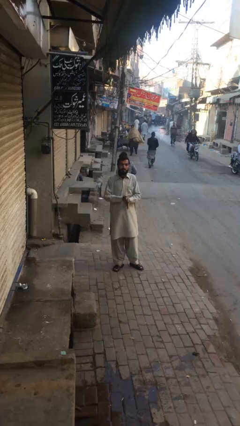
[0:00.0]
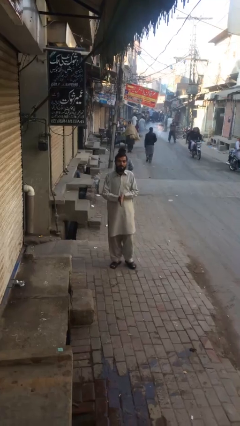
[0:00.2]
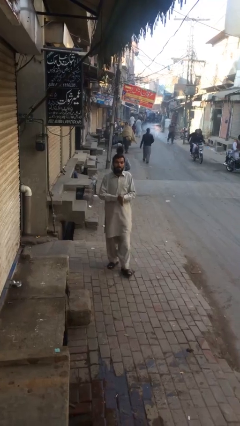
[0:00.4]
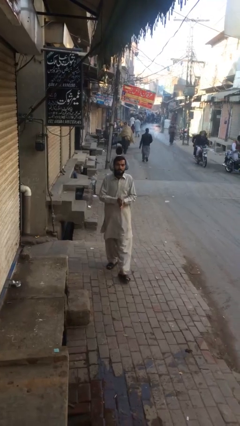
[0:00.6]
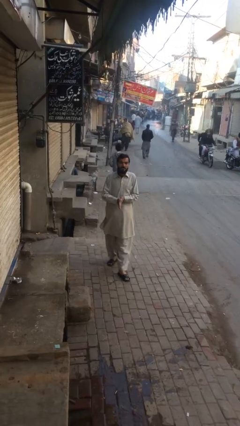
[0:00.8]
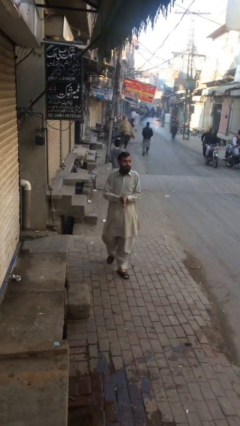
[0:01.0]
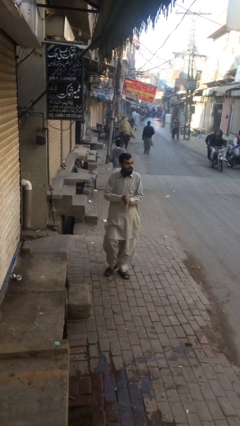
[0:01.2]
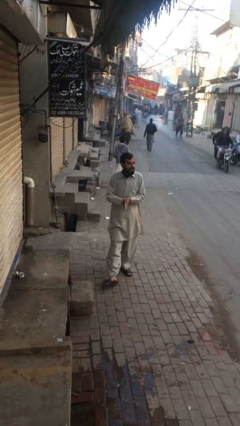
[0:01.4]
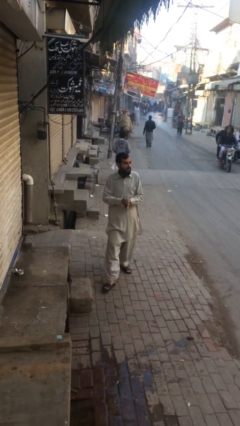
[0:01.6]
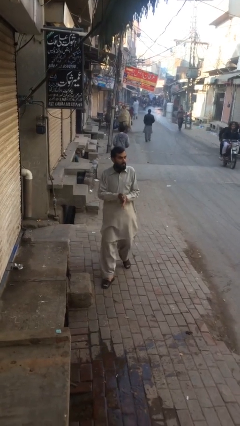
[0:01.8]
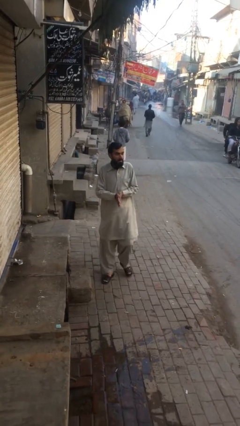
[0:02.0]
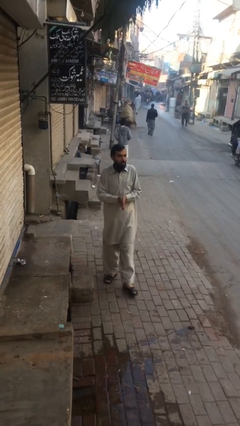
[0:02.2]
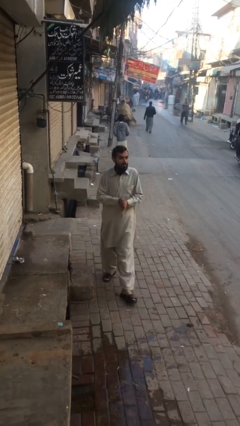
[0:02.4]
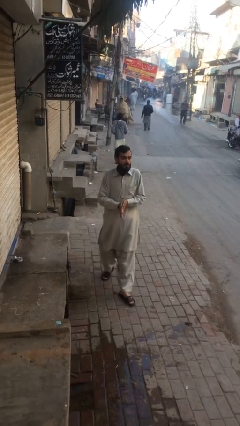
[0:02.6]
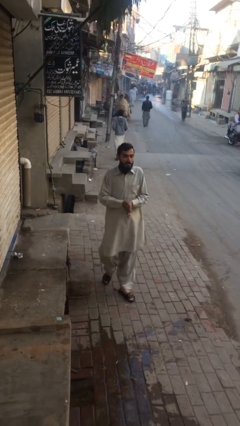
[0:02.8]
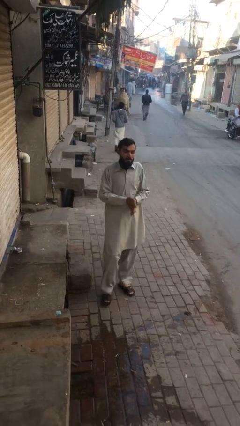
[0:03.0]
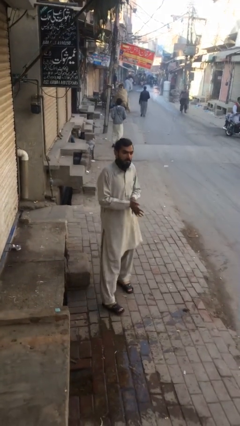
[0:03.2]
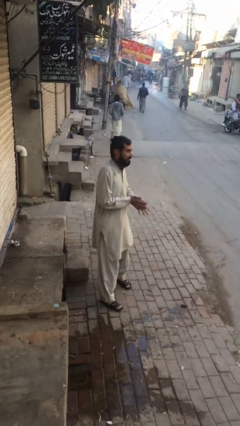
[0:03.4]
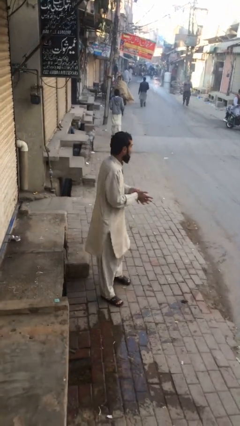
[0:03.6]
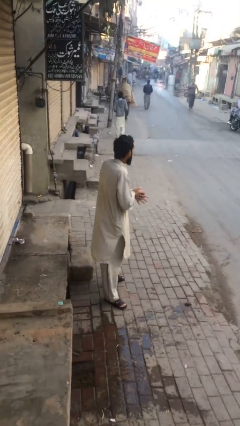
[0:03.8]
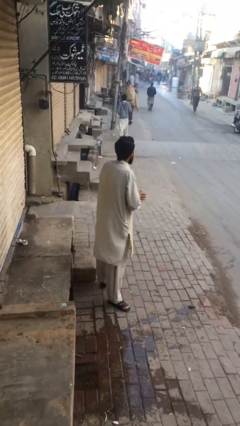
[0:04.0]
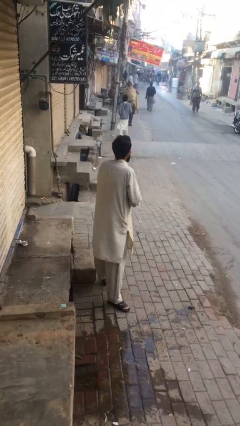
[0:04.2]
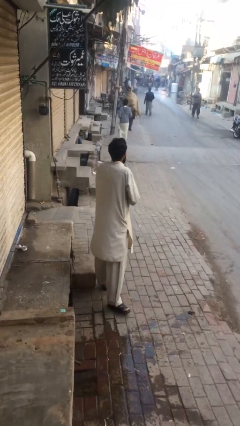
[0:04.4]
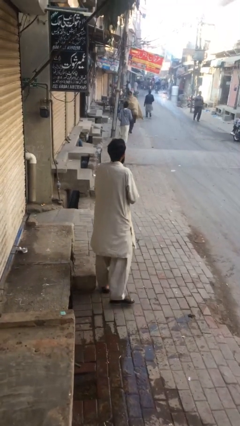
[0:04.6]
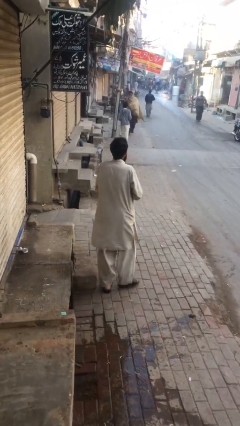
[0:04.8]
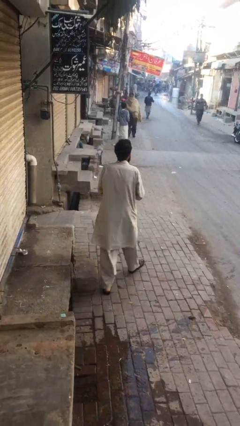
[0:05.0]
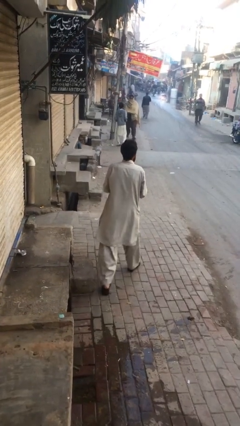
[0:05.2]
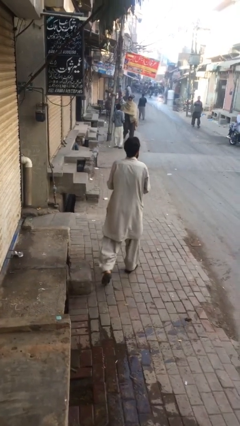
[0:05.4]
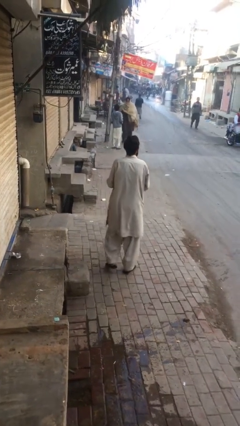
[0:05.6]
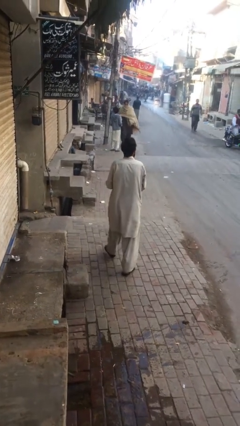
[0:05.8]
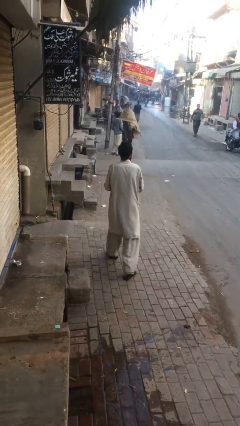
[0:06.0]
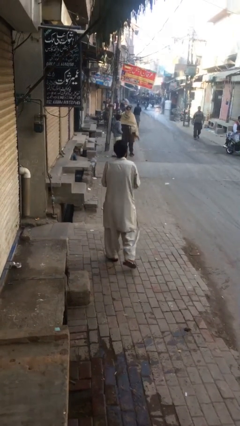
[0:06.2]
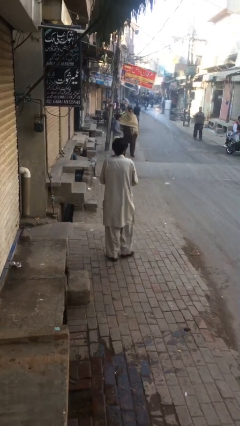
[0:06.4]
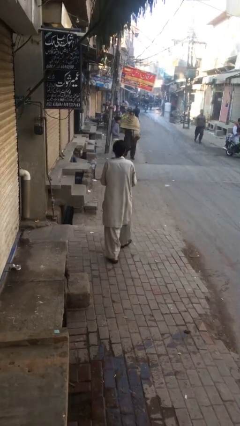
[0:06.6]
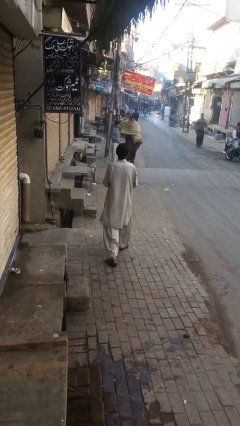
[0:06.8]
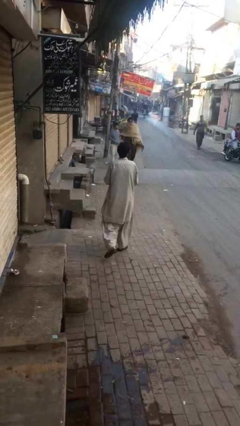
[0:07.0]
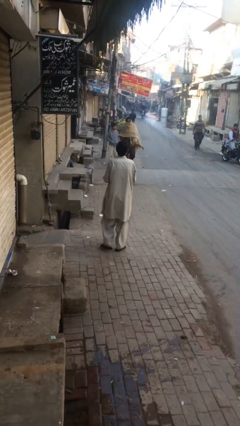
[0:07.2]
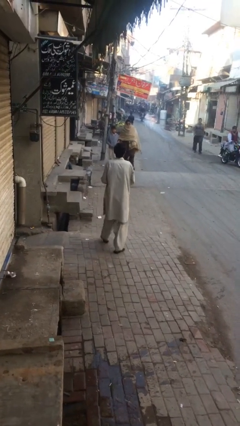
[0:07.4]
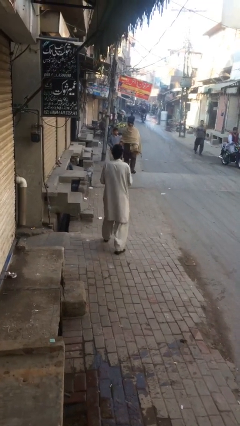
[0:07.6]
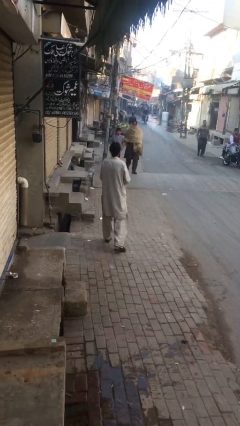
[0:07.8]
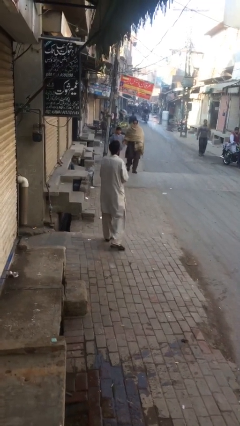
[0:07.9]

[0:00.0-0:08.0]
person walks

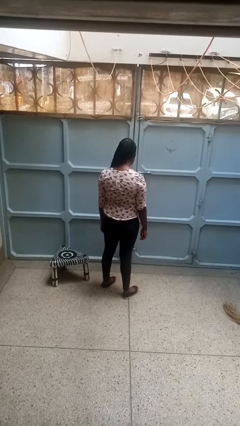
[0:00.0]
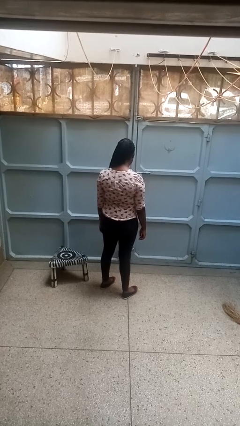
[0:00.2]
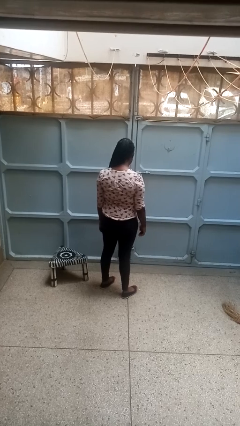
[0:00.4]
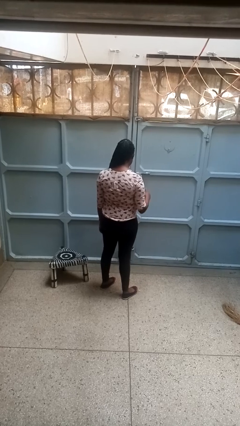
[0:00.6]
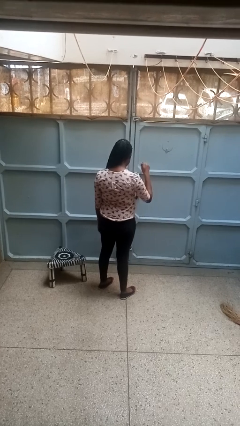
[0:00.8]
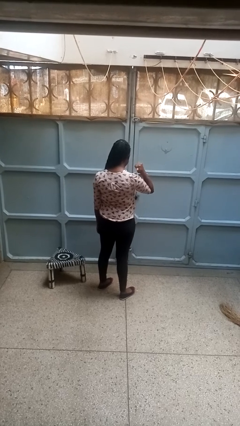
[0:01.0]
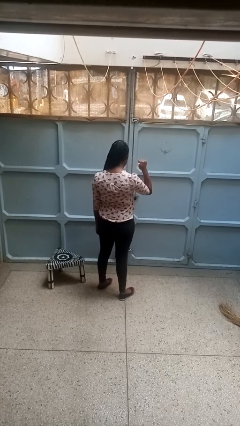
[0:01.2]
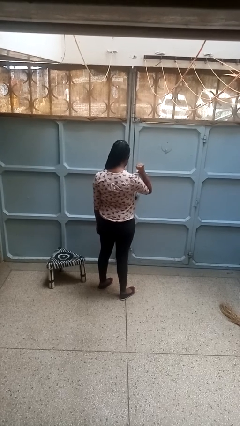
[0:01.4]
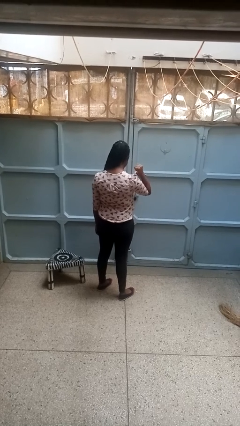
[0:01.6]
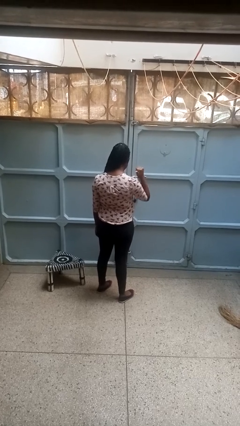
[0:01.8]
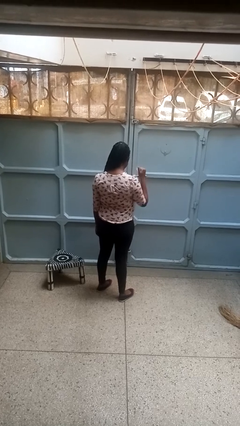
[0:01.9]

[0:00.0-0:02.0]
person gestures behind me

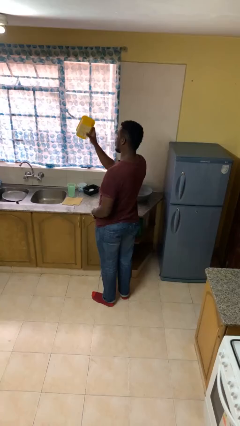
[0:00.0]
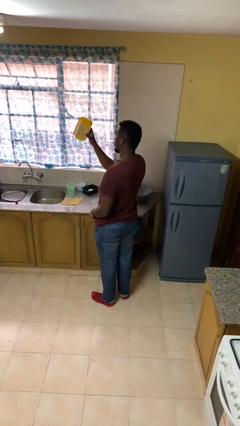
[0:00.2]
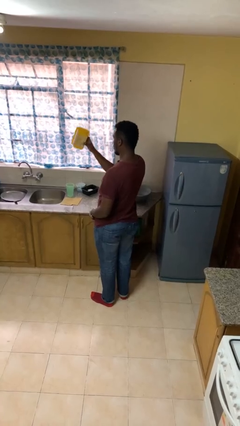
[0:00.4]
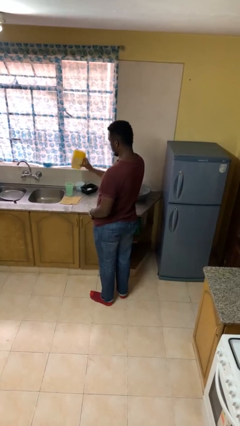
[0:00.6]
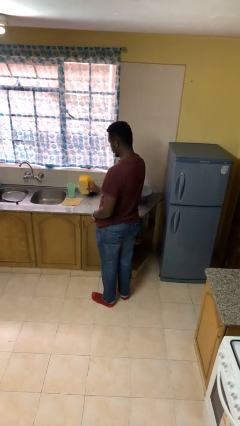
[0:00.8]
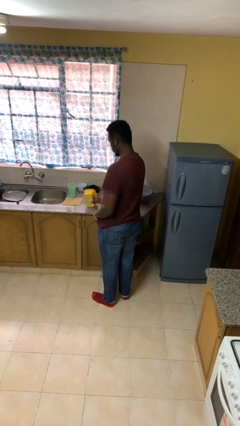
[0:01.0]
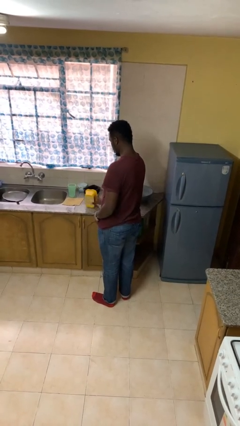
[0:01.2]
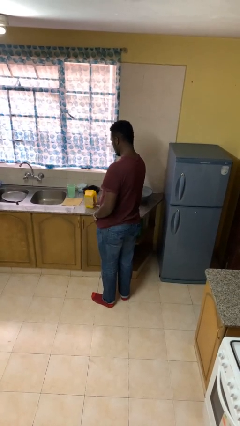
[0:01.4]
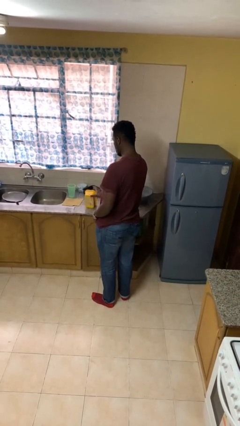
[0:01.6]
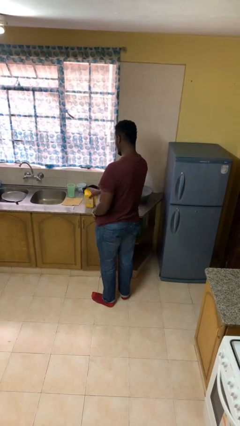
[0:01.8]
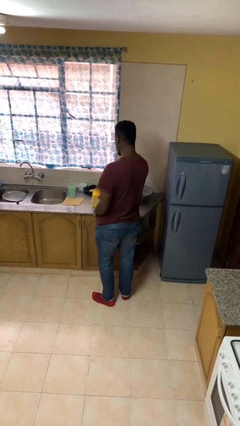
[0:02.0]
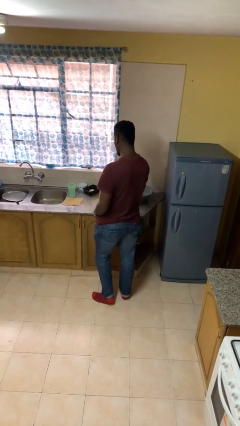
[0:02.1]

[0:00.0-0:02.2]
person puts down object on countertop

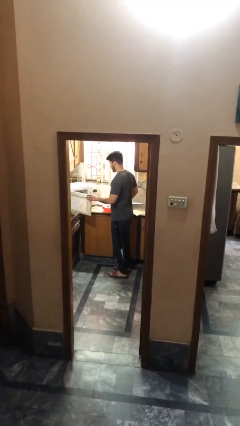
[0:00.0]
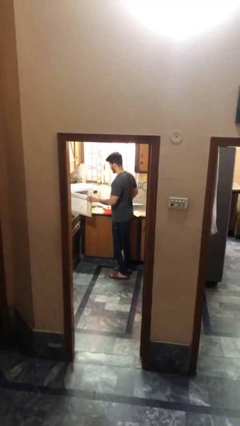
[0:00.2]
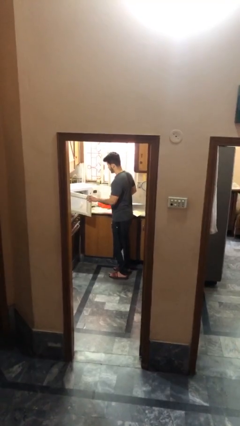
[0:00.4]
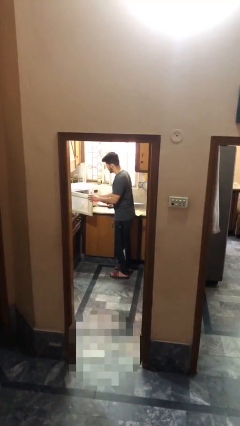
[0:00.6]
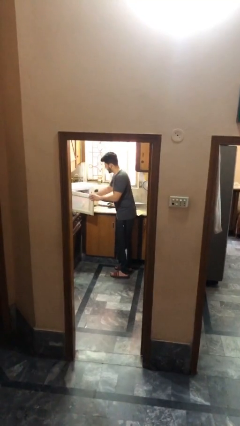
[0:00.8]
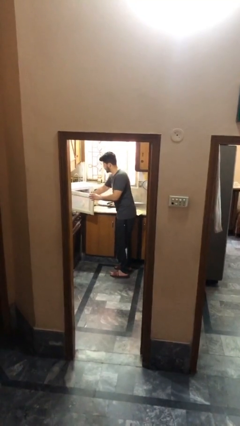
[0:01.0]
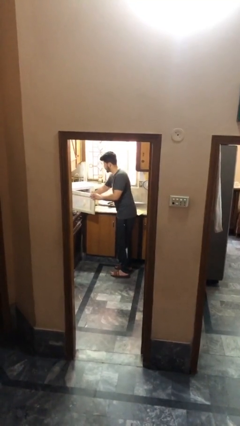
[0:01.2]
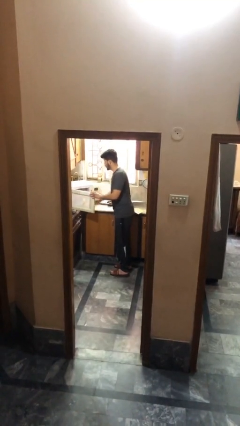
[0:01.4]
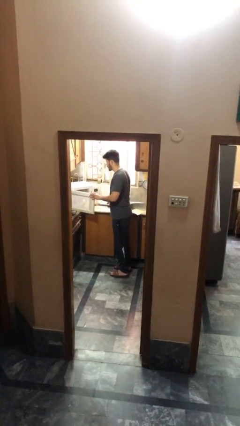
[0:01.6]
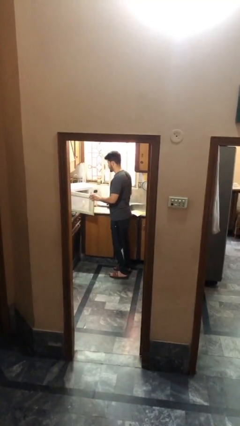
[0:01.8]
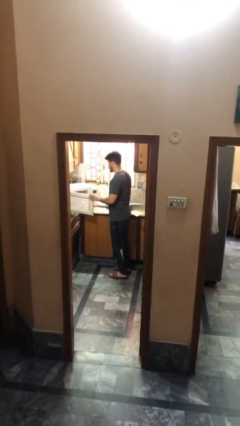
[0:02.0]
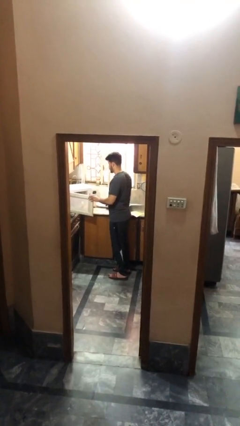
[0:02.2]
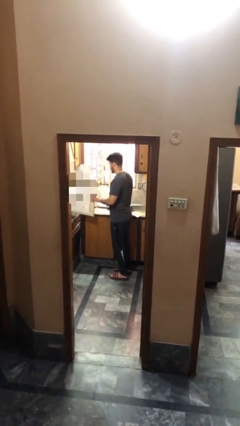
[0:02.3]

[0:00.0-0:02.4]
person puts object into microwave

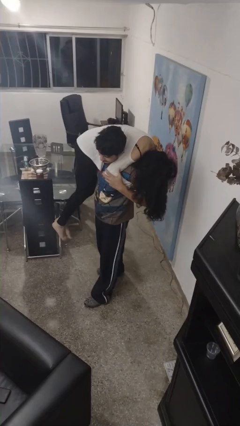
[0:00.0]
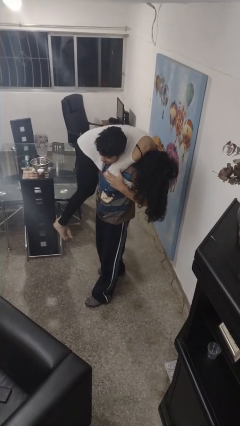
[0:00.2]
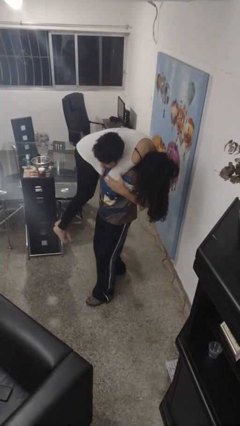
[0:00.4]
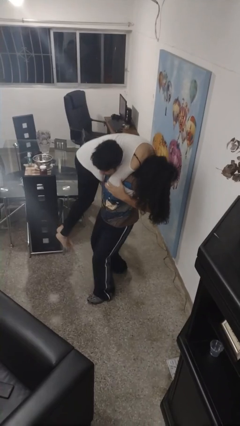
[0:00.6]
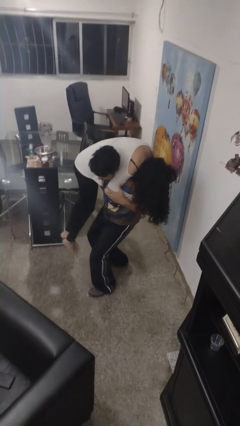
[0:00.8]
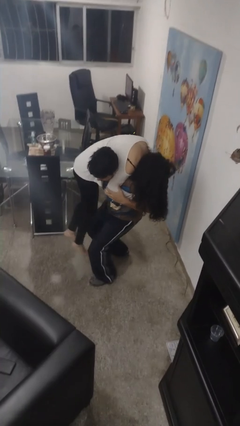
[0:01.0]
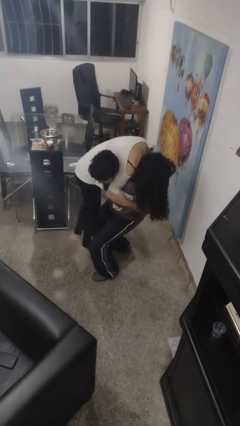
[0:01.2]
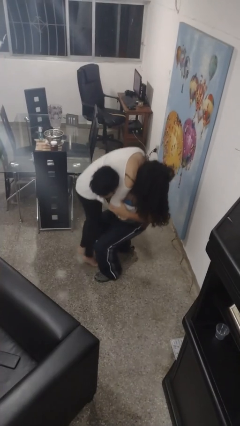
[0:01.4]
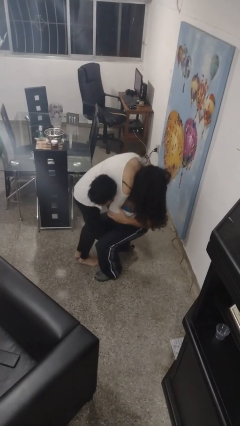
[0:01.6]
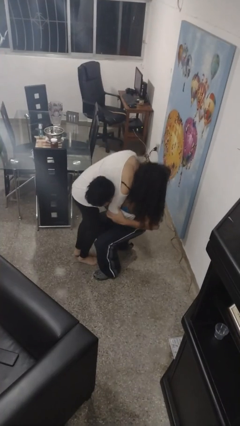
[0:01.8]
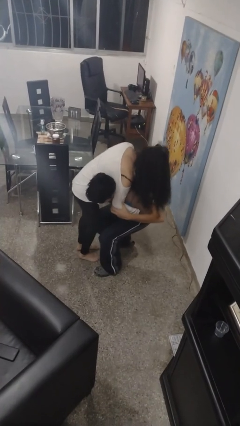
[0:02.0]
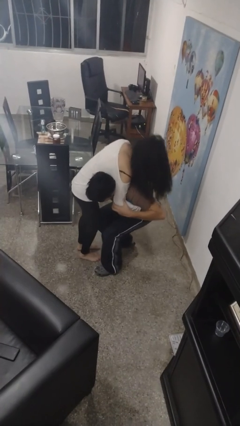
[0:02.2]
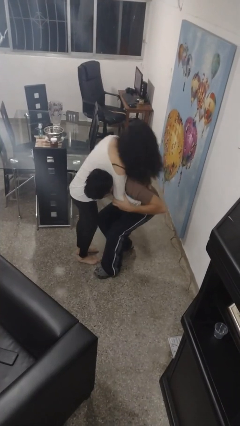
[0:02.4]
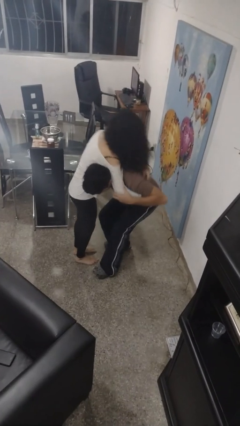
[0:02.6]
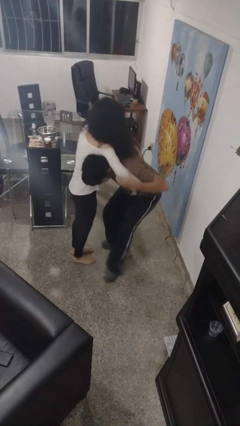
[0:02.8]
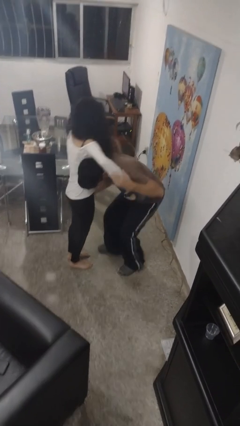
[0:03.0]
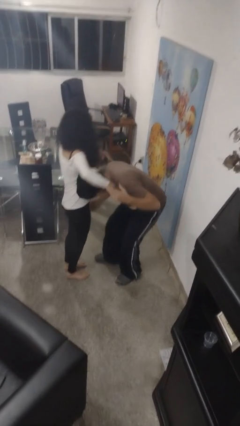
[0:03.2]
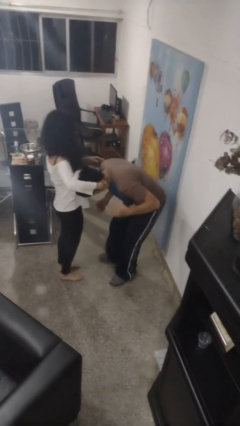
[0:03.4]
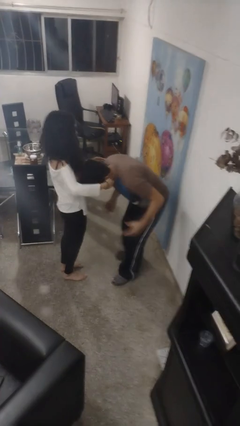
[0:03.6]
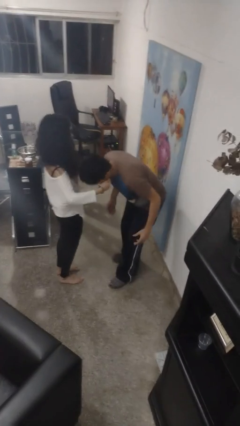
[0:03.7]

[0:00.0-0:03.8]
person puts down person
